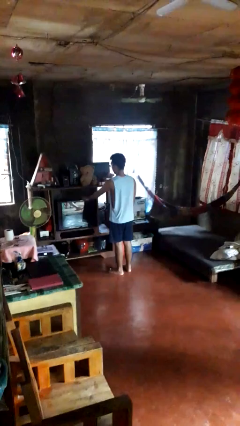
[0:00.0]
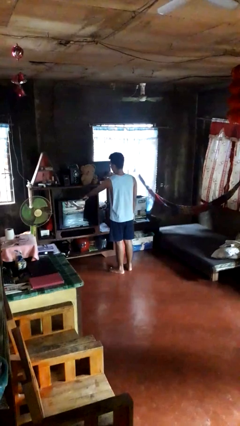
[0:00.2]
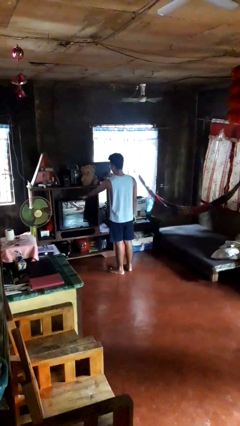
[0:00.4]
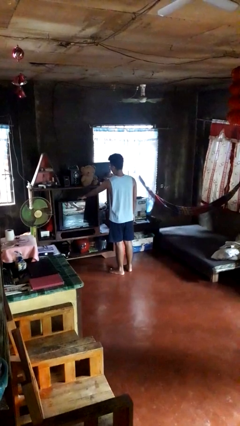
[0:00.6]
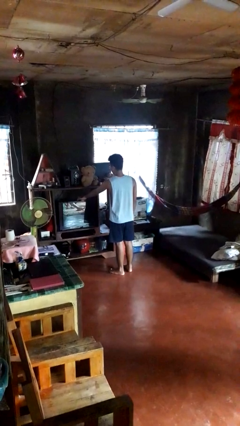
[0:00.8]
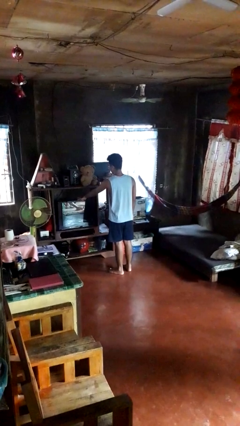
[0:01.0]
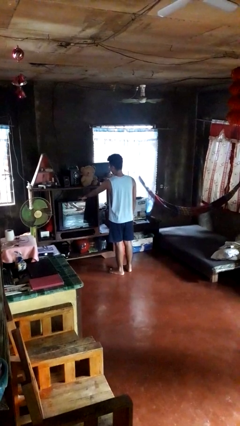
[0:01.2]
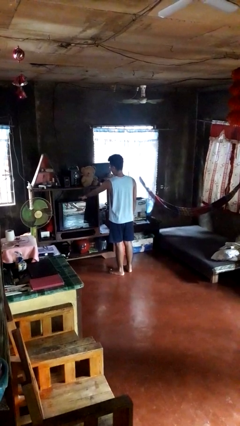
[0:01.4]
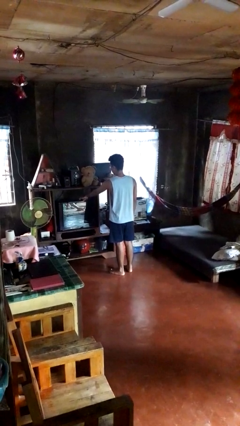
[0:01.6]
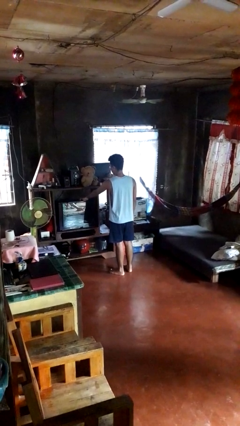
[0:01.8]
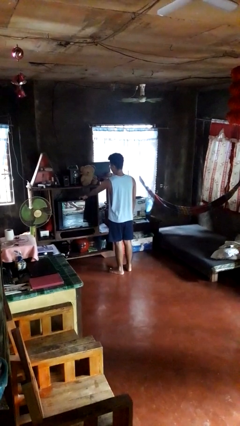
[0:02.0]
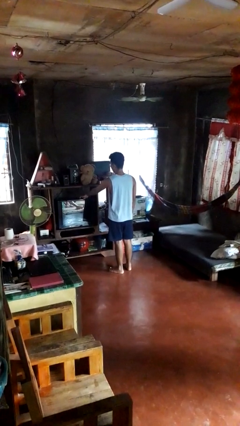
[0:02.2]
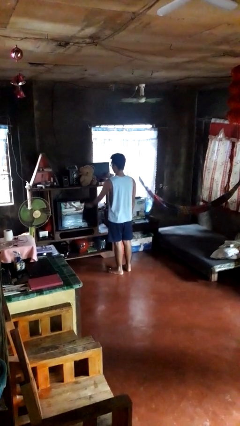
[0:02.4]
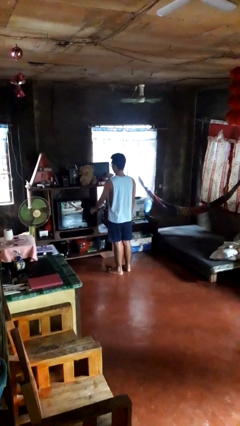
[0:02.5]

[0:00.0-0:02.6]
person taps object with finger

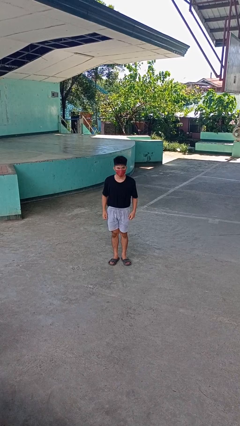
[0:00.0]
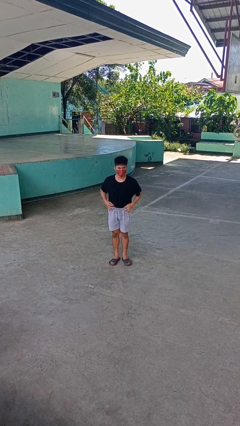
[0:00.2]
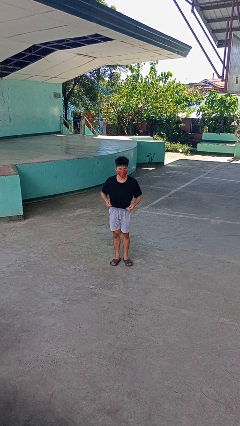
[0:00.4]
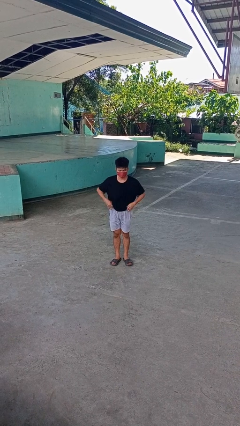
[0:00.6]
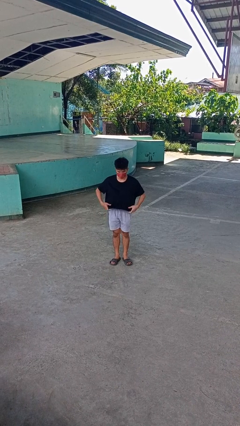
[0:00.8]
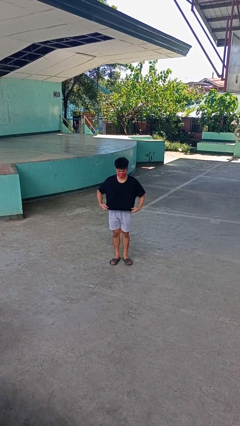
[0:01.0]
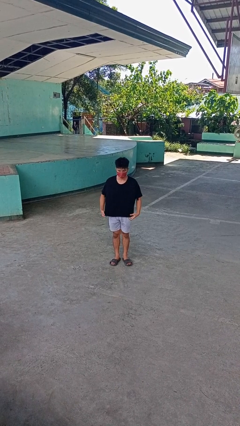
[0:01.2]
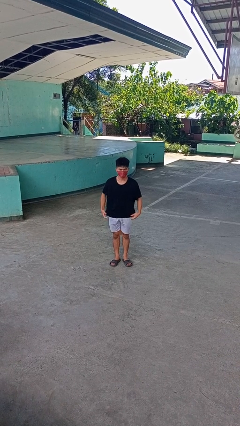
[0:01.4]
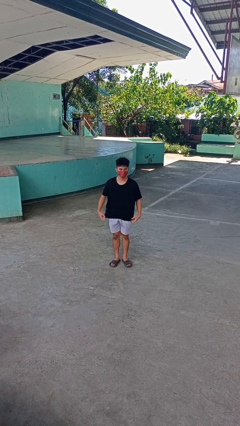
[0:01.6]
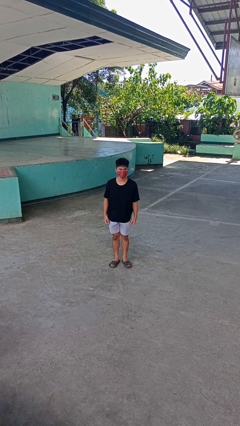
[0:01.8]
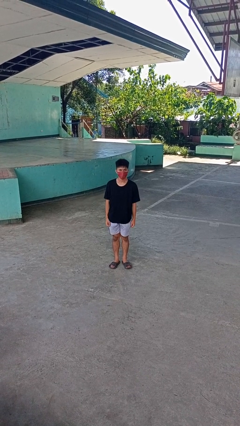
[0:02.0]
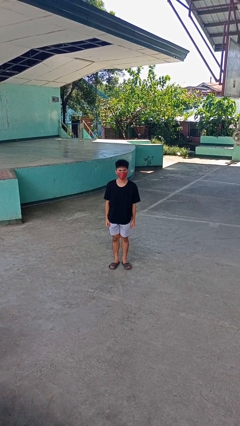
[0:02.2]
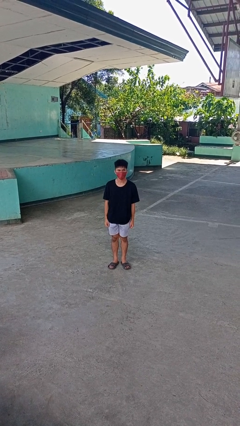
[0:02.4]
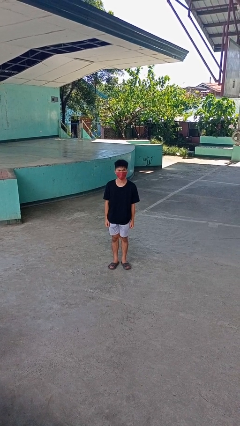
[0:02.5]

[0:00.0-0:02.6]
person untucks shirt

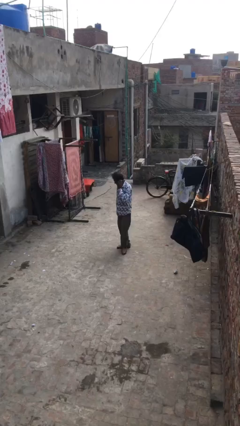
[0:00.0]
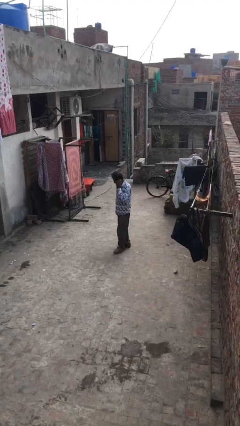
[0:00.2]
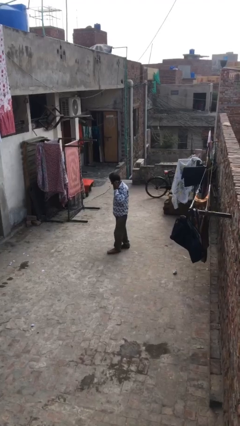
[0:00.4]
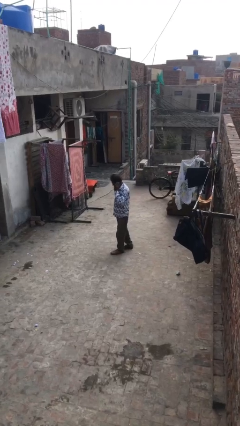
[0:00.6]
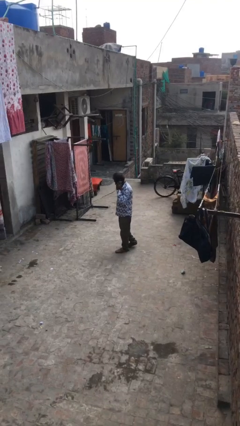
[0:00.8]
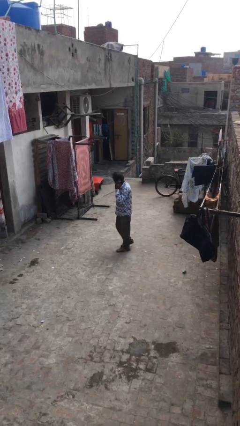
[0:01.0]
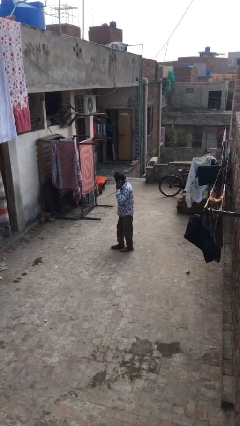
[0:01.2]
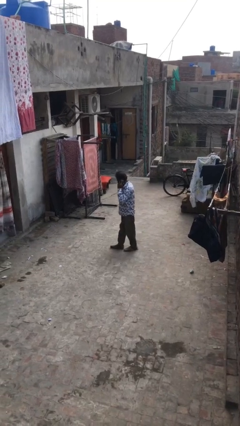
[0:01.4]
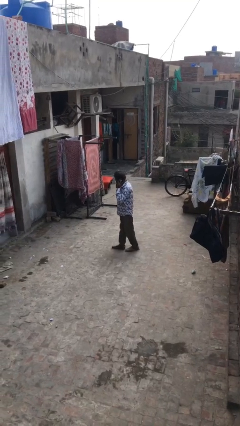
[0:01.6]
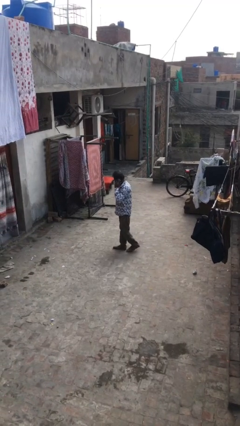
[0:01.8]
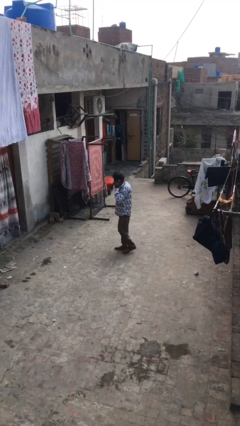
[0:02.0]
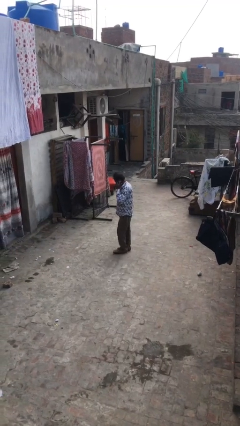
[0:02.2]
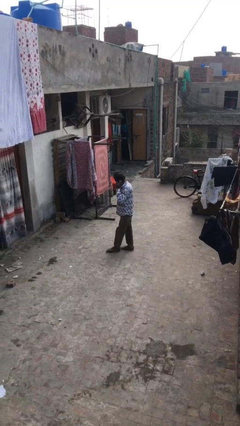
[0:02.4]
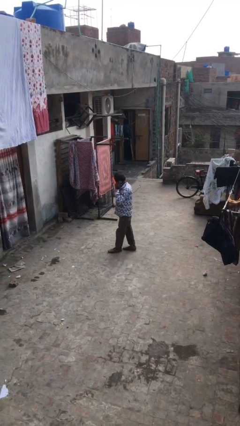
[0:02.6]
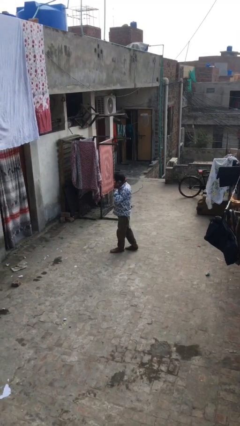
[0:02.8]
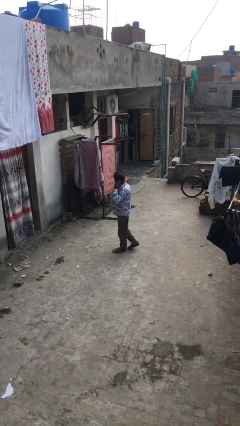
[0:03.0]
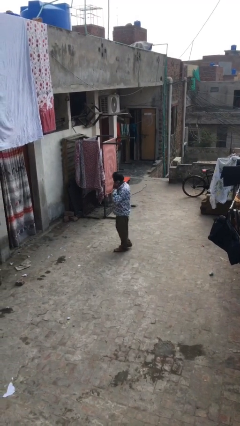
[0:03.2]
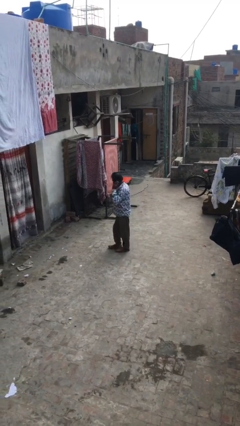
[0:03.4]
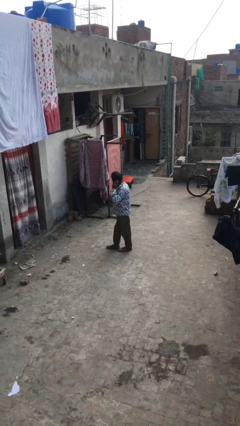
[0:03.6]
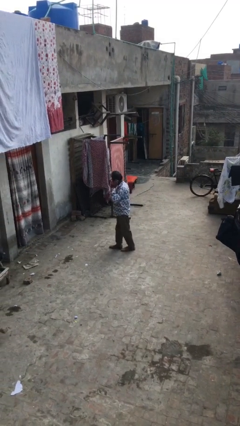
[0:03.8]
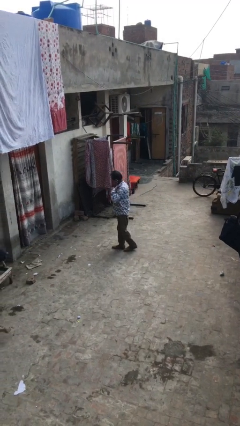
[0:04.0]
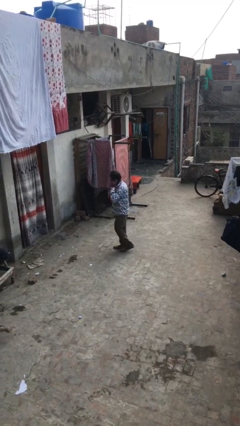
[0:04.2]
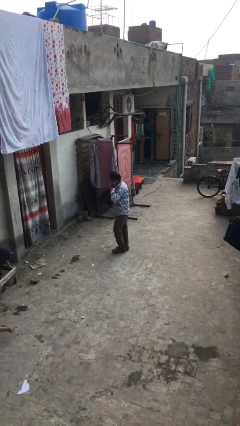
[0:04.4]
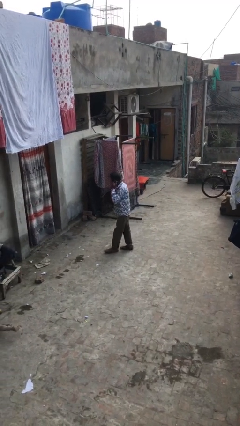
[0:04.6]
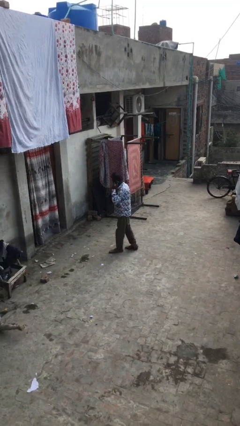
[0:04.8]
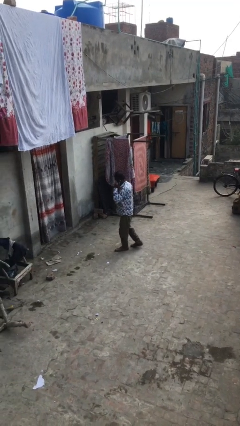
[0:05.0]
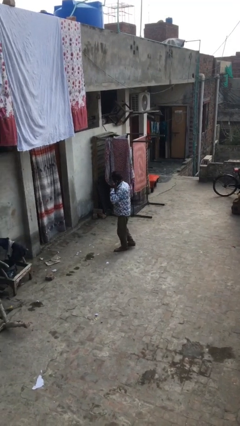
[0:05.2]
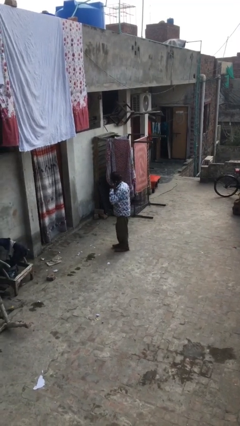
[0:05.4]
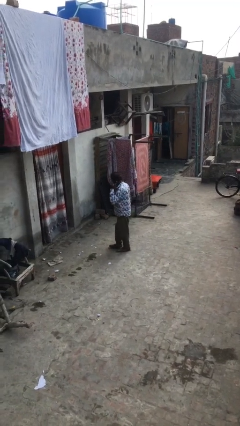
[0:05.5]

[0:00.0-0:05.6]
person talks on phone

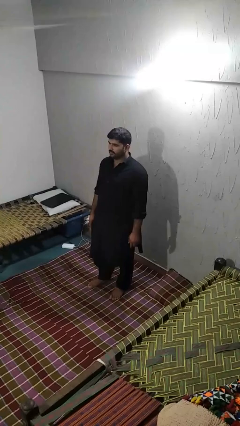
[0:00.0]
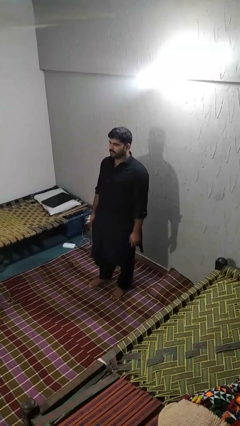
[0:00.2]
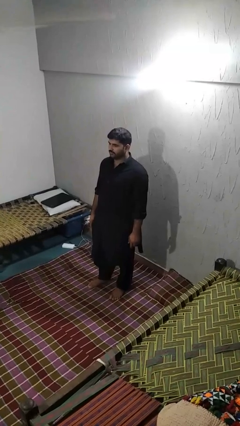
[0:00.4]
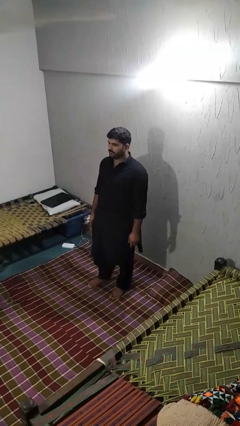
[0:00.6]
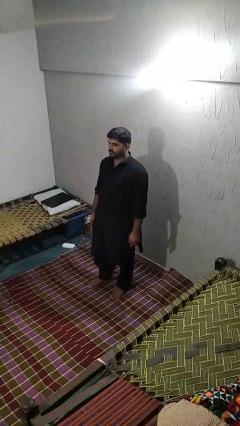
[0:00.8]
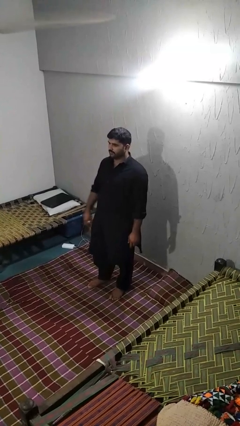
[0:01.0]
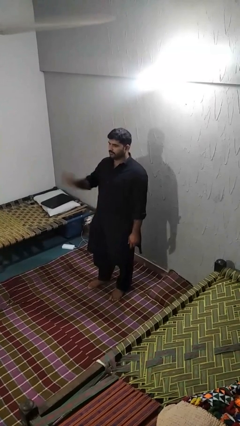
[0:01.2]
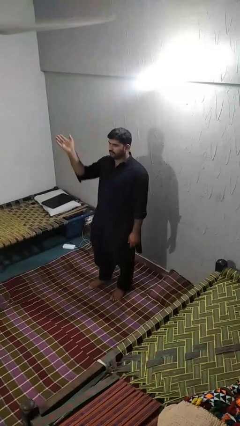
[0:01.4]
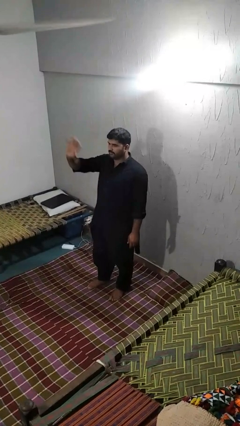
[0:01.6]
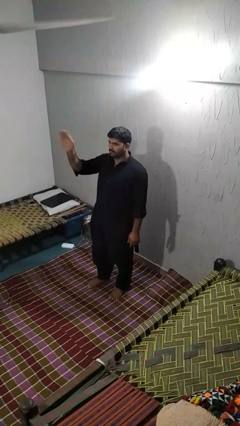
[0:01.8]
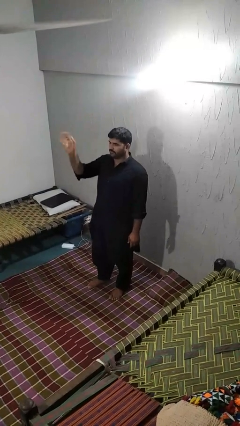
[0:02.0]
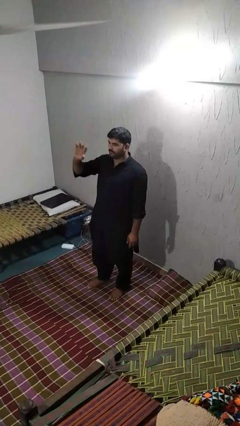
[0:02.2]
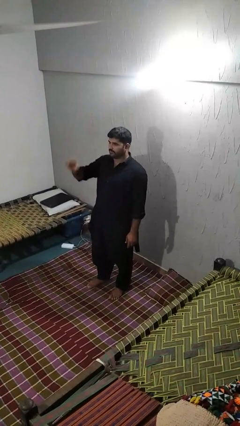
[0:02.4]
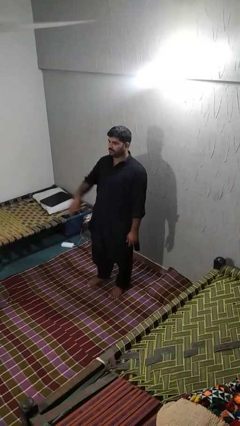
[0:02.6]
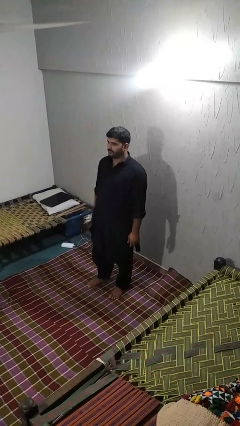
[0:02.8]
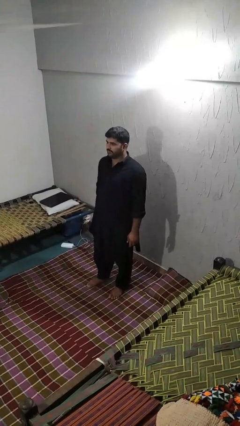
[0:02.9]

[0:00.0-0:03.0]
person waves at person

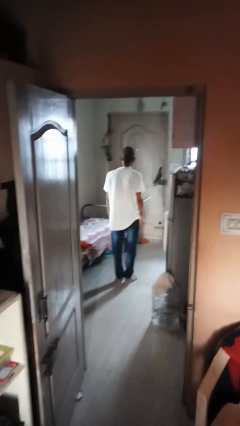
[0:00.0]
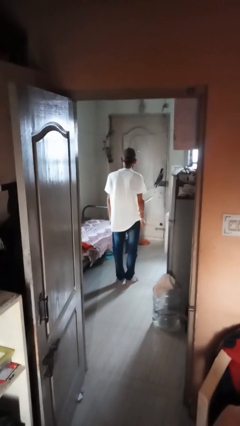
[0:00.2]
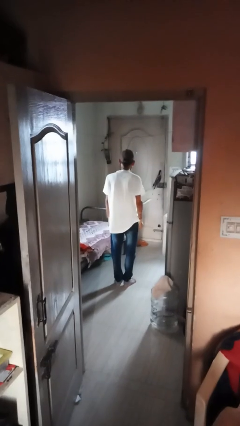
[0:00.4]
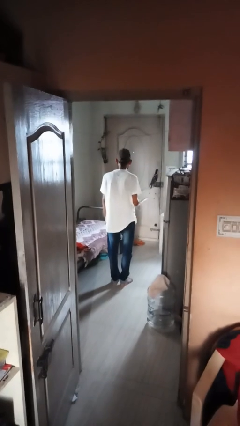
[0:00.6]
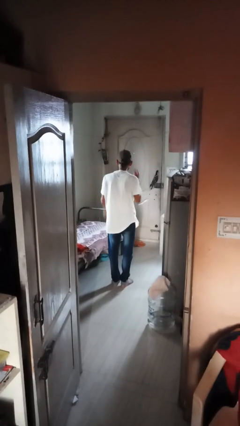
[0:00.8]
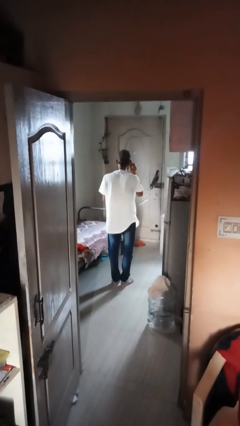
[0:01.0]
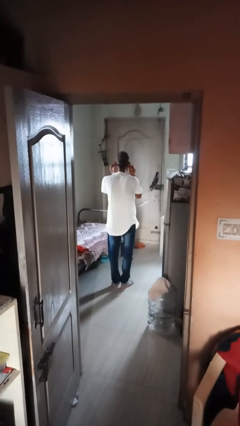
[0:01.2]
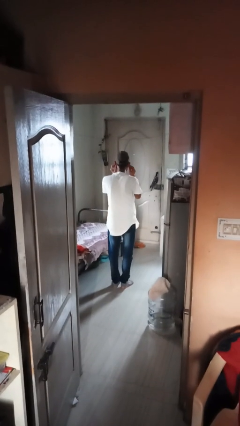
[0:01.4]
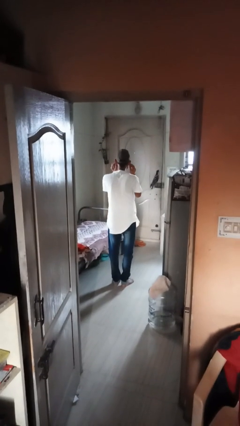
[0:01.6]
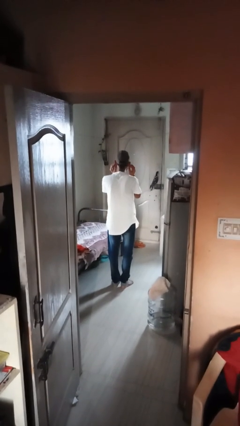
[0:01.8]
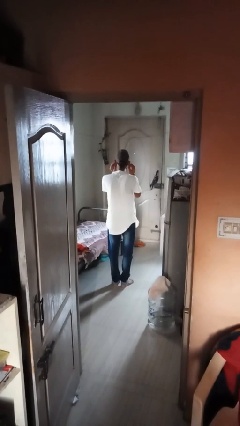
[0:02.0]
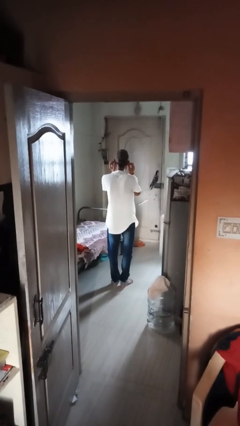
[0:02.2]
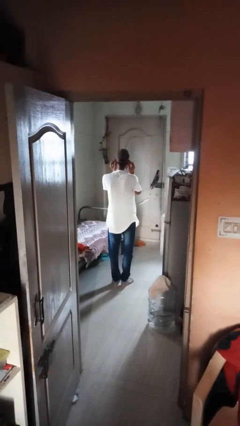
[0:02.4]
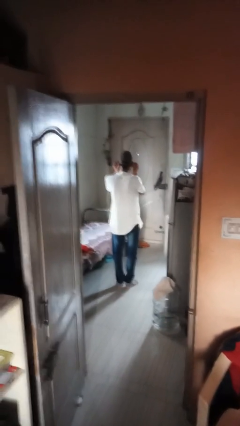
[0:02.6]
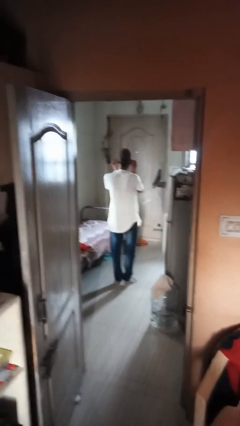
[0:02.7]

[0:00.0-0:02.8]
person touches earlobe

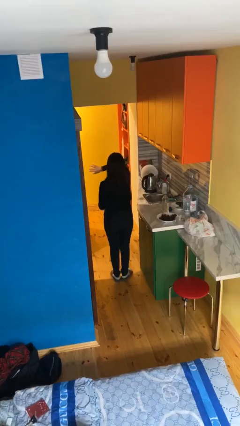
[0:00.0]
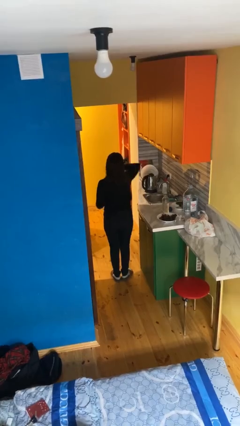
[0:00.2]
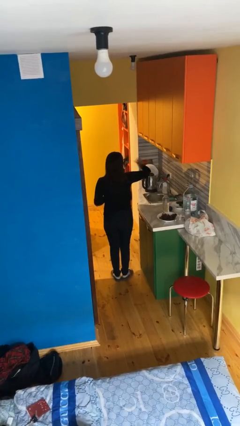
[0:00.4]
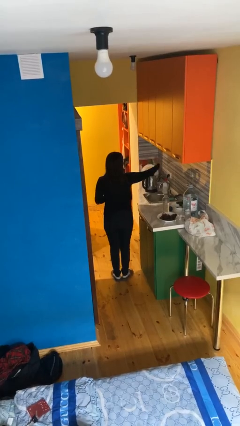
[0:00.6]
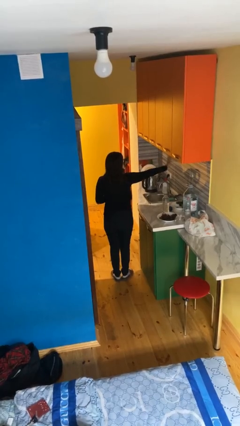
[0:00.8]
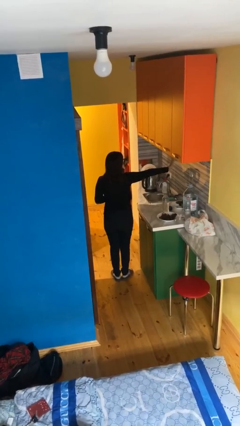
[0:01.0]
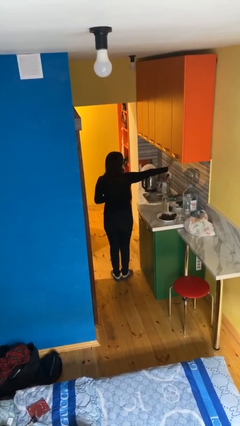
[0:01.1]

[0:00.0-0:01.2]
person gestures swipe right
